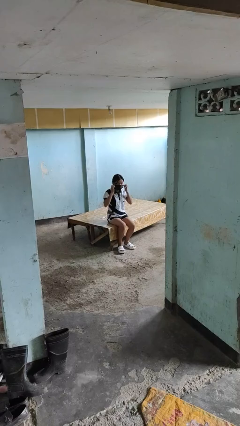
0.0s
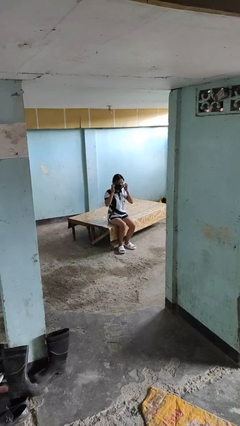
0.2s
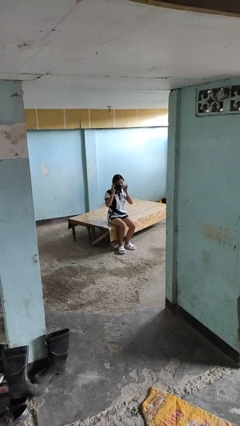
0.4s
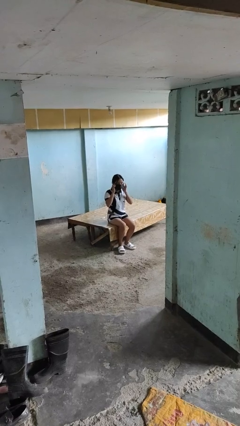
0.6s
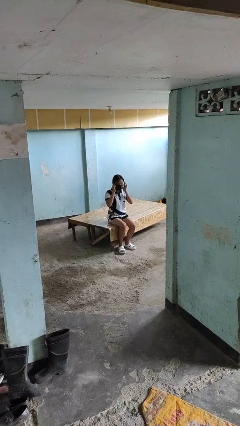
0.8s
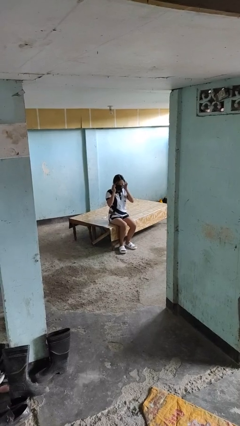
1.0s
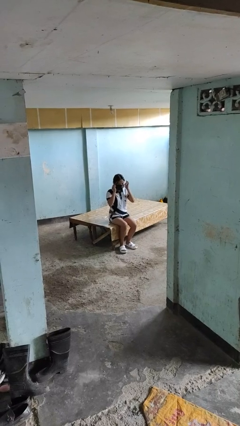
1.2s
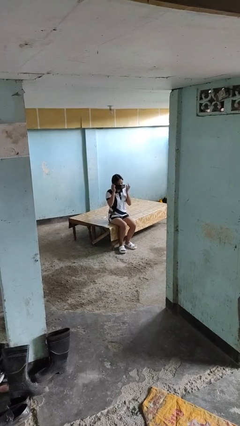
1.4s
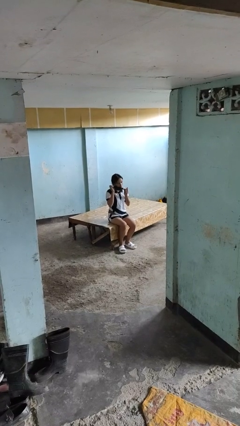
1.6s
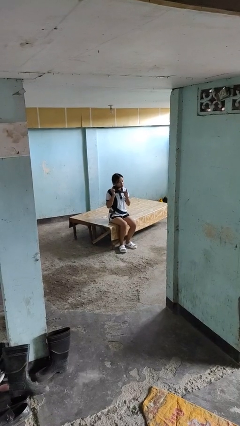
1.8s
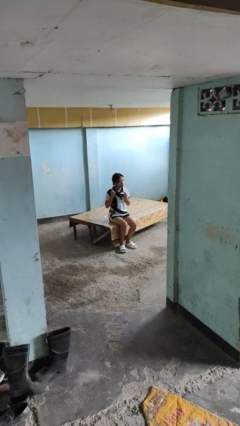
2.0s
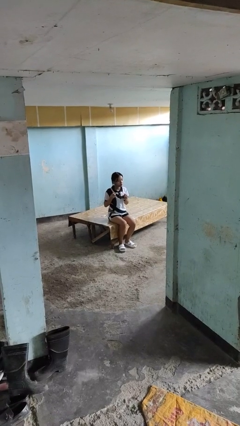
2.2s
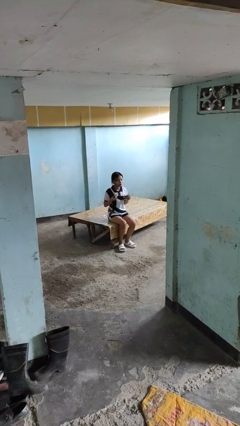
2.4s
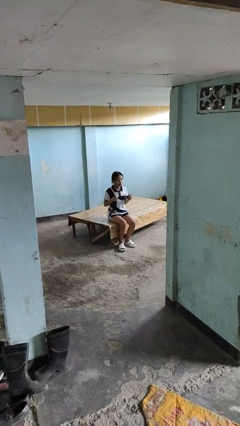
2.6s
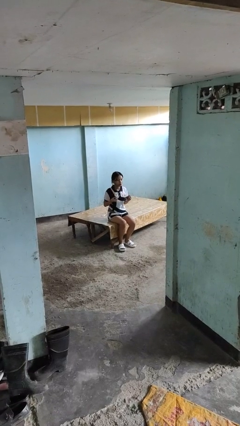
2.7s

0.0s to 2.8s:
person takes off facemask

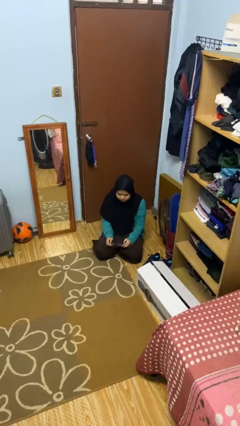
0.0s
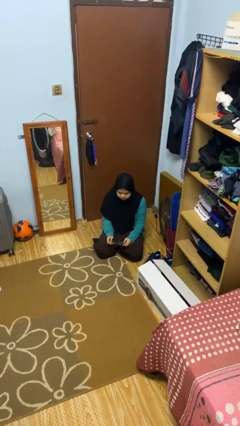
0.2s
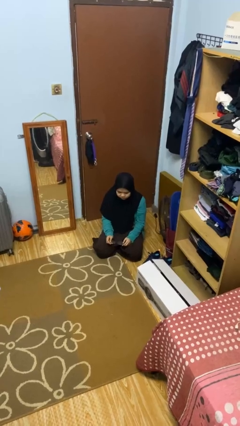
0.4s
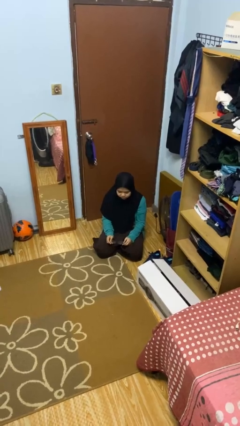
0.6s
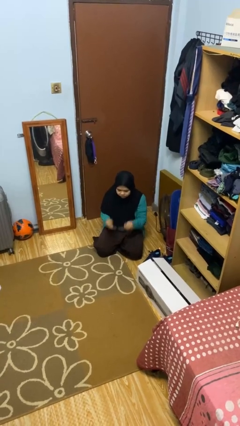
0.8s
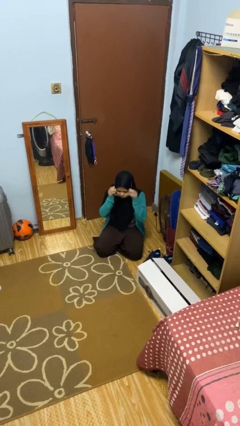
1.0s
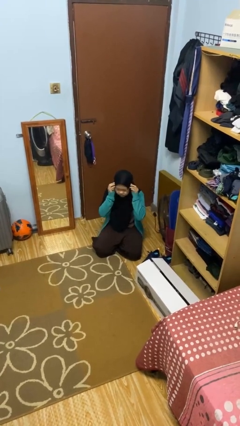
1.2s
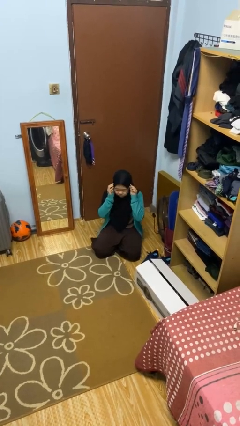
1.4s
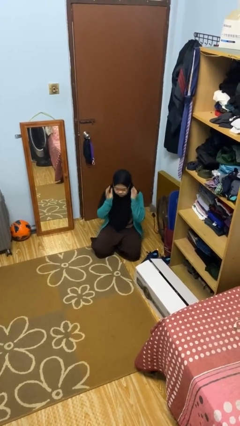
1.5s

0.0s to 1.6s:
person puts on glasses

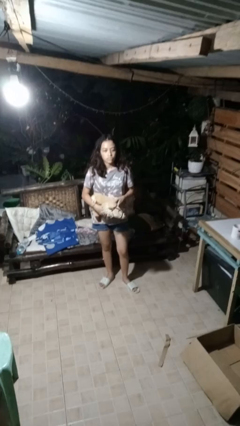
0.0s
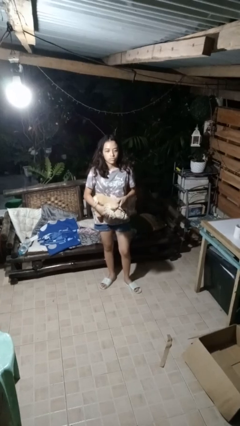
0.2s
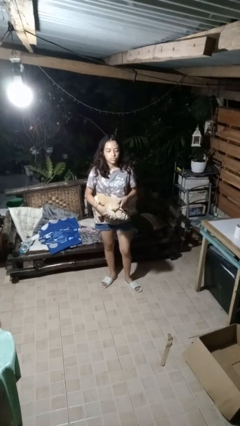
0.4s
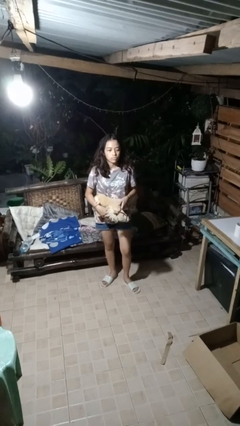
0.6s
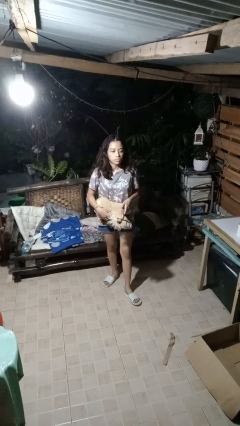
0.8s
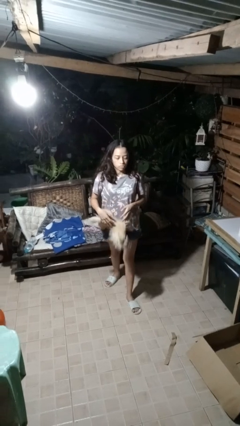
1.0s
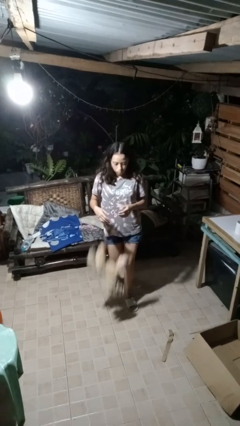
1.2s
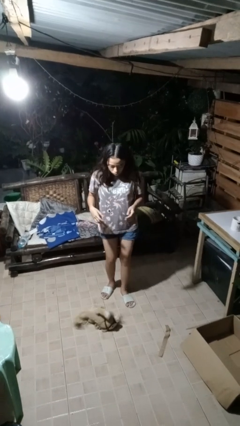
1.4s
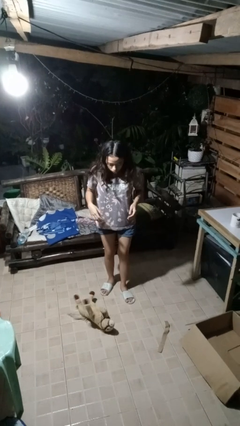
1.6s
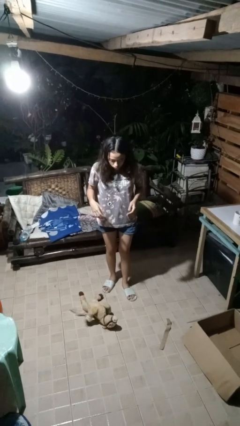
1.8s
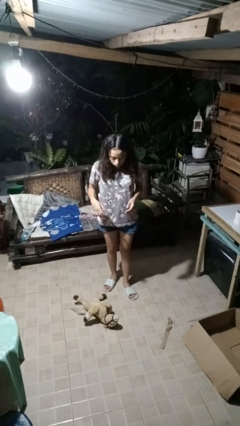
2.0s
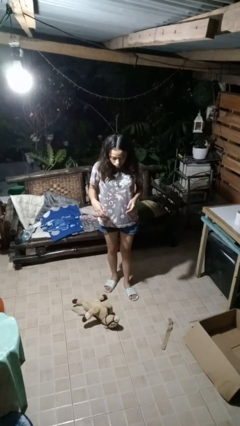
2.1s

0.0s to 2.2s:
person drops object

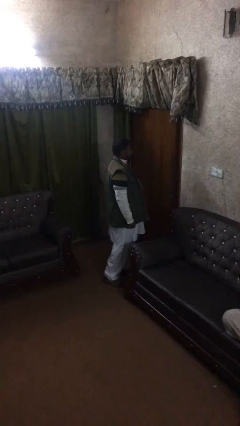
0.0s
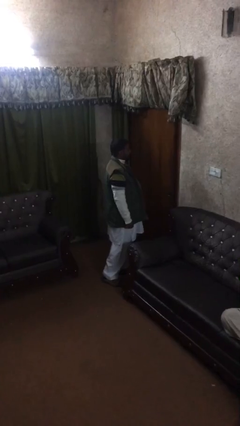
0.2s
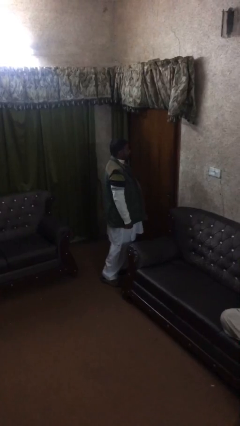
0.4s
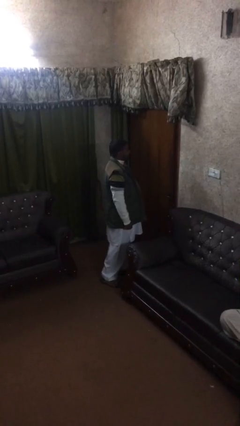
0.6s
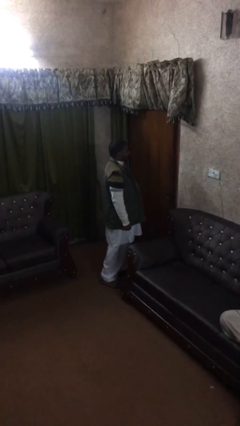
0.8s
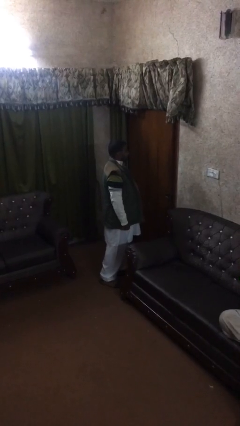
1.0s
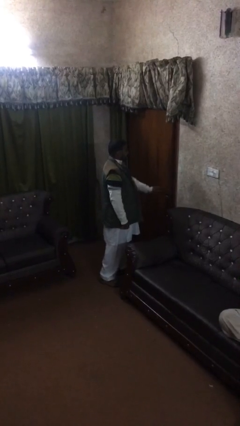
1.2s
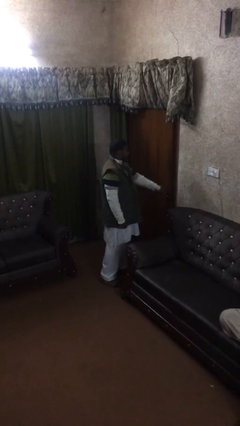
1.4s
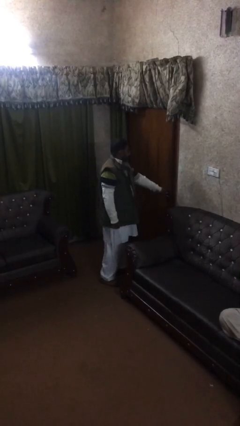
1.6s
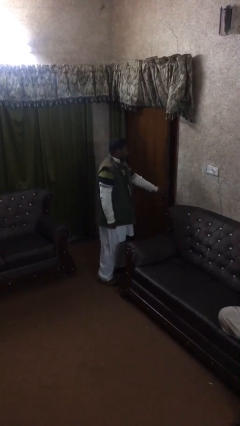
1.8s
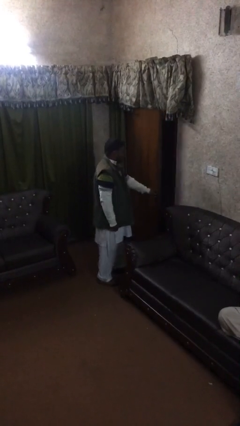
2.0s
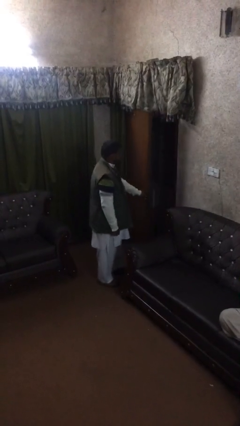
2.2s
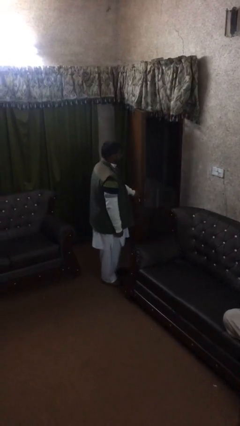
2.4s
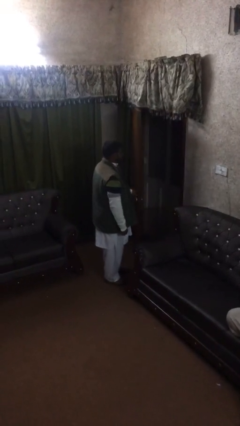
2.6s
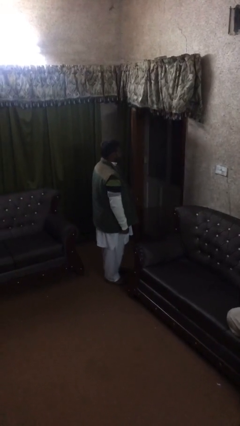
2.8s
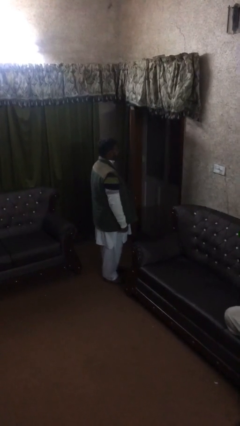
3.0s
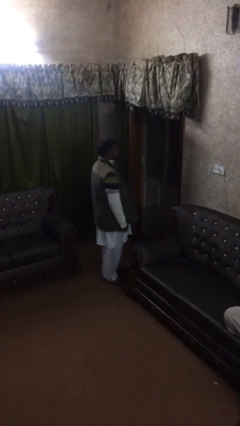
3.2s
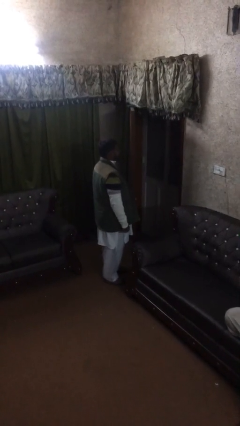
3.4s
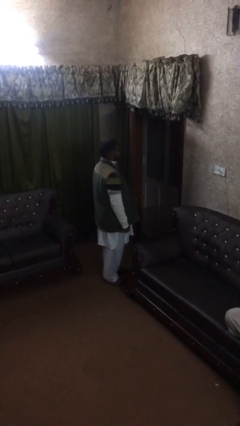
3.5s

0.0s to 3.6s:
person opens facility door

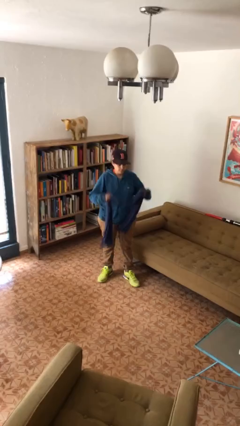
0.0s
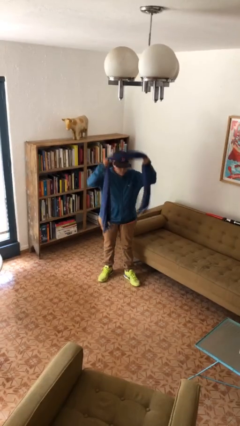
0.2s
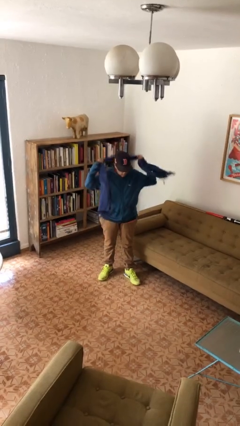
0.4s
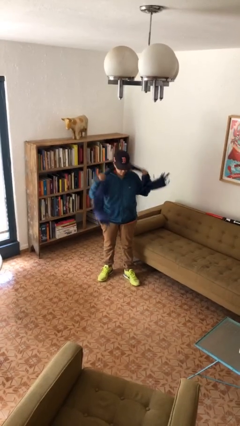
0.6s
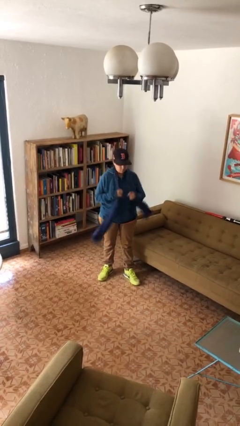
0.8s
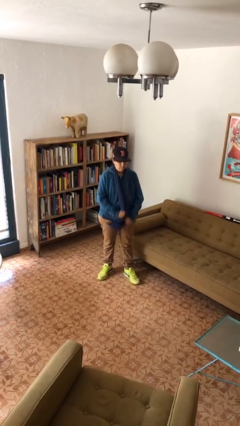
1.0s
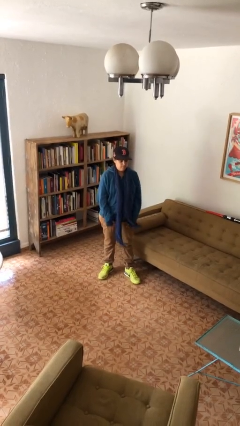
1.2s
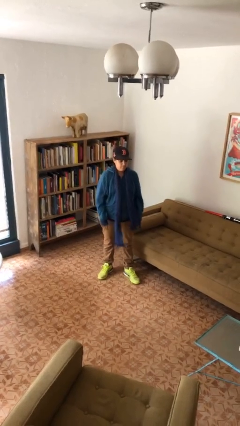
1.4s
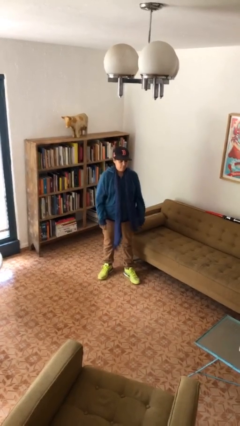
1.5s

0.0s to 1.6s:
person puts on scarf

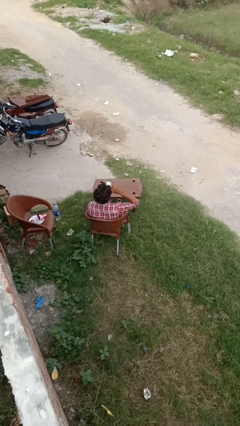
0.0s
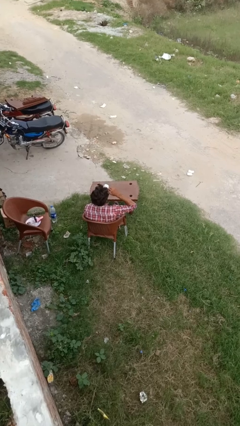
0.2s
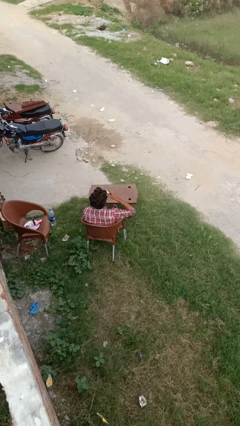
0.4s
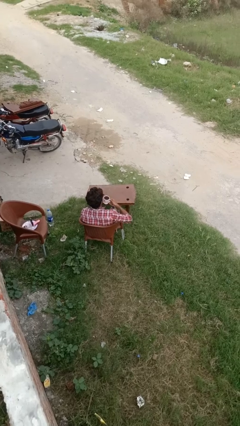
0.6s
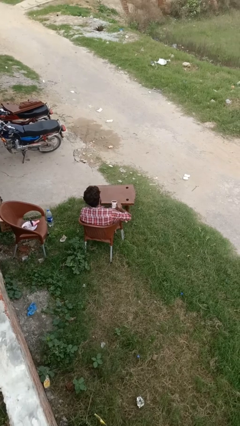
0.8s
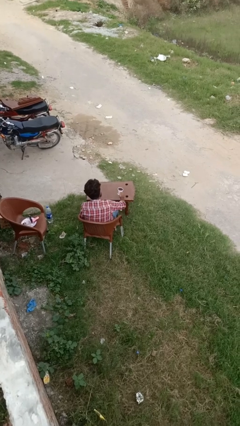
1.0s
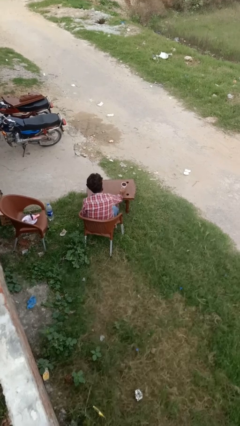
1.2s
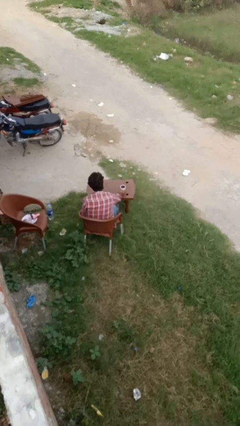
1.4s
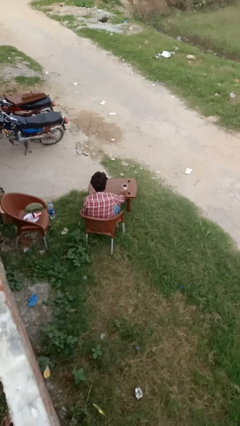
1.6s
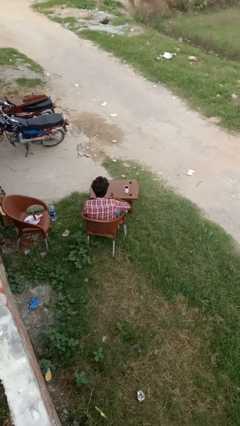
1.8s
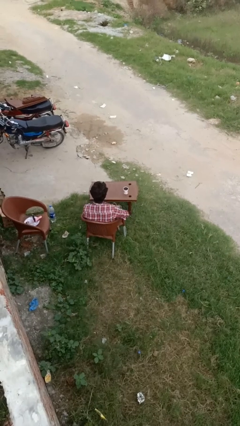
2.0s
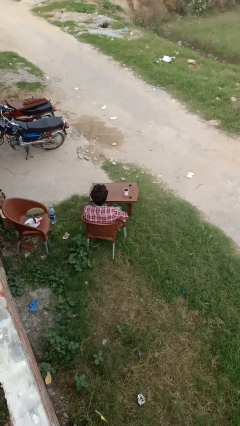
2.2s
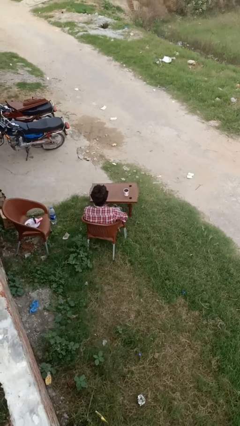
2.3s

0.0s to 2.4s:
person puts down object on table

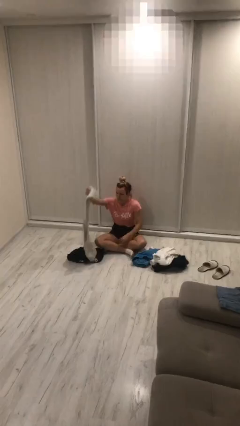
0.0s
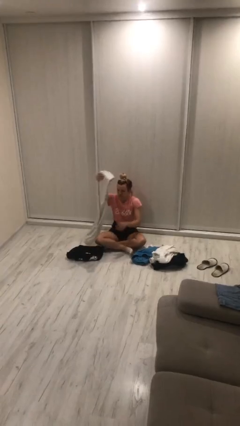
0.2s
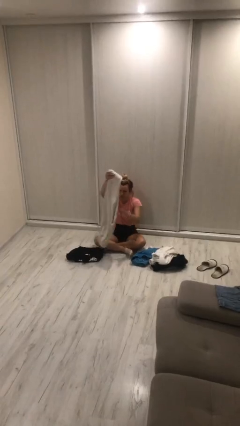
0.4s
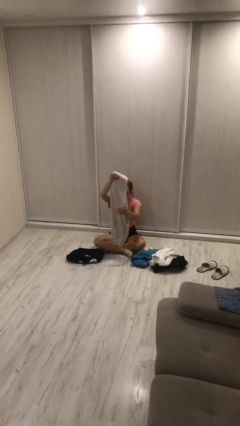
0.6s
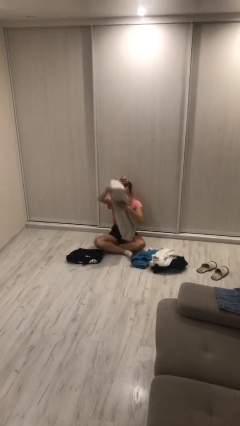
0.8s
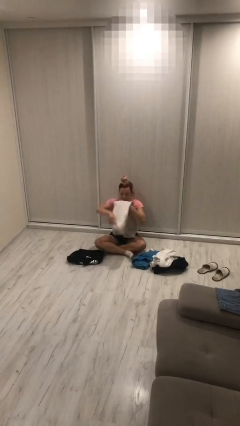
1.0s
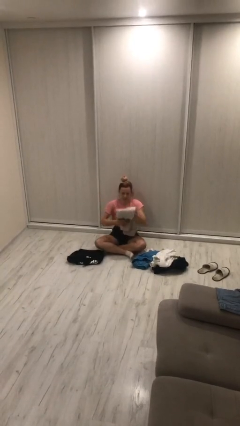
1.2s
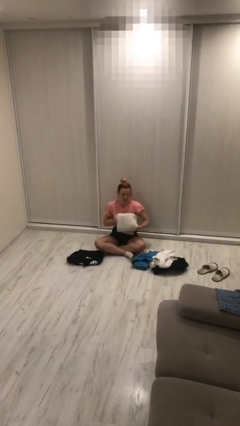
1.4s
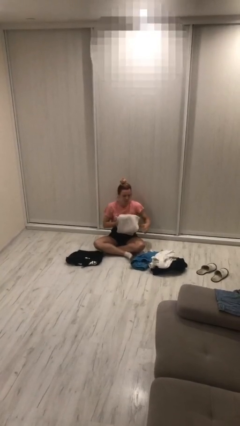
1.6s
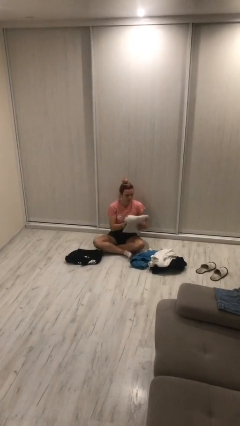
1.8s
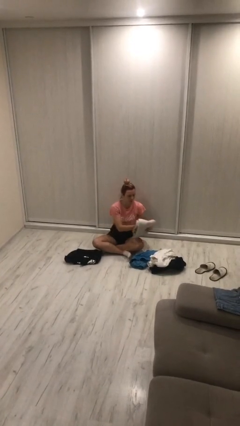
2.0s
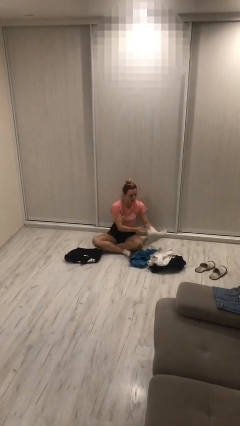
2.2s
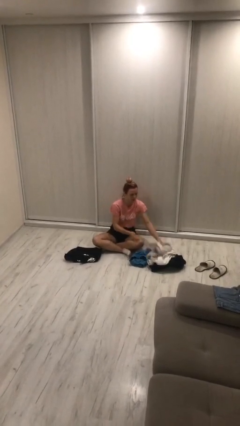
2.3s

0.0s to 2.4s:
person folds pants

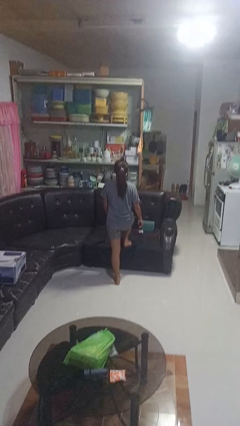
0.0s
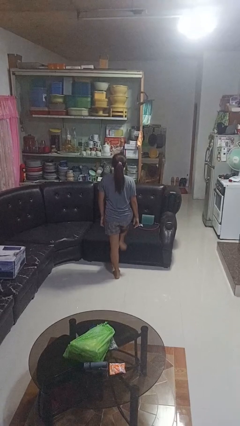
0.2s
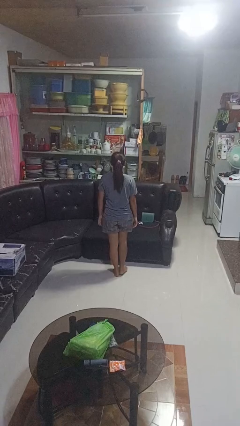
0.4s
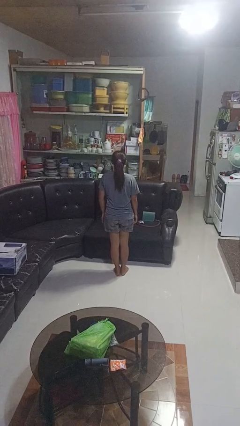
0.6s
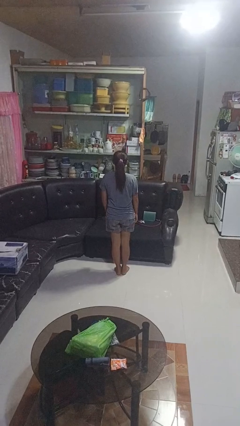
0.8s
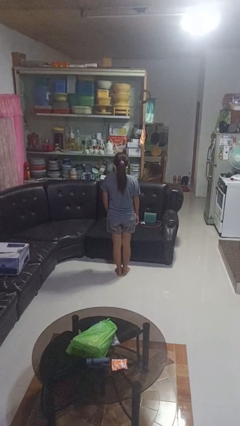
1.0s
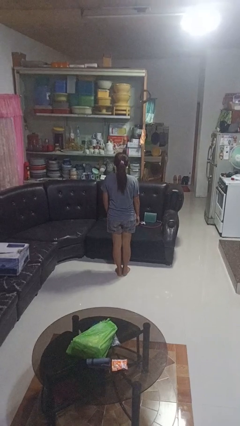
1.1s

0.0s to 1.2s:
person climbs off couch
